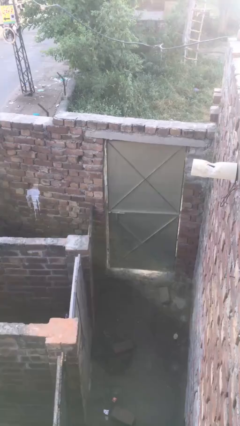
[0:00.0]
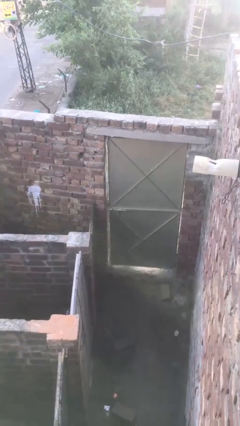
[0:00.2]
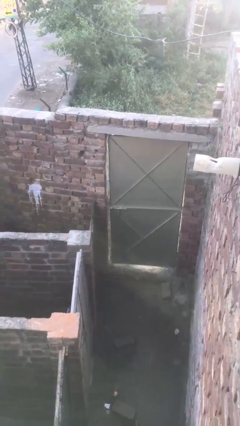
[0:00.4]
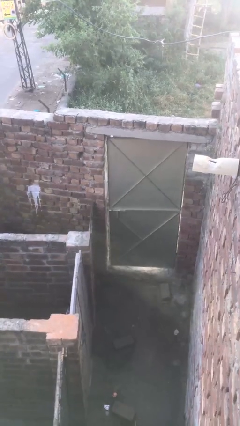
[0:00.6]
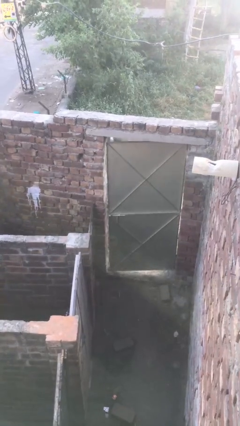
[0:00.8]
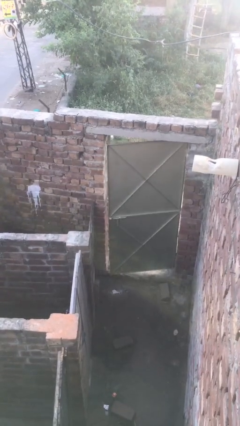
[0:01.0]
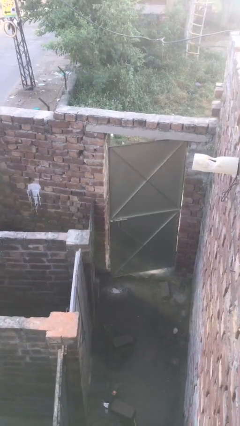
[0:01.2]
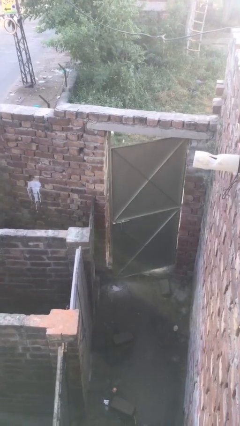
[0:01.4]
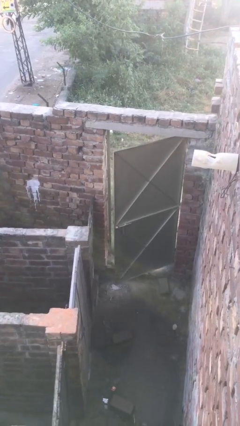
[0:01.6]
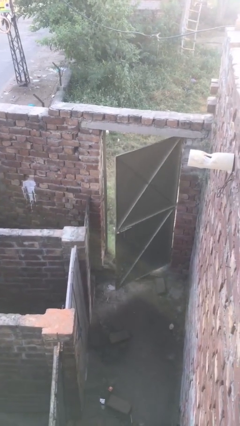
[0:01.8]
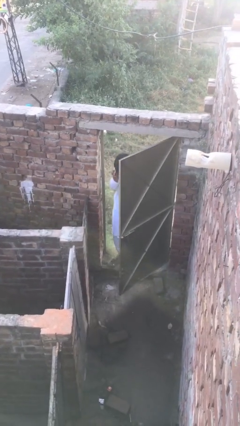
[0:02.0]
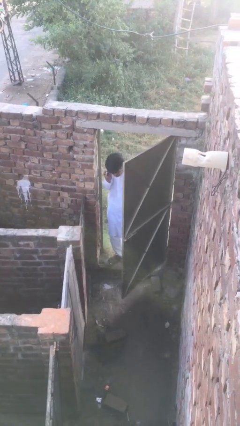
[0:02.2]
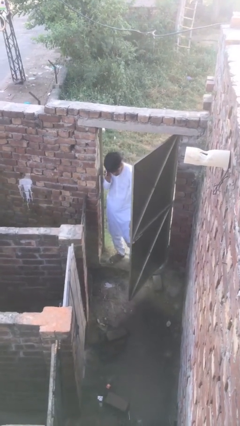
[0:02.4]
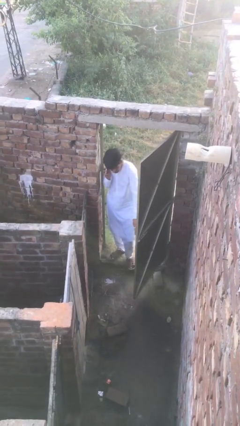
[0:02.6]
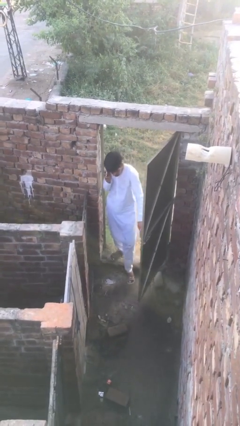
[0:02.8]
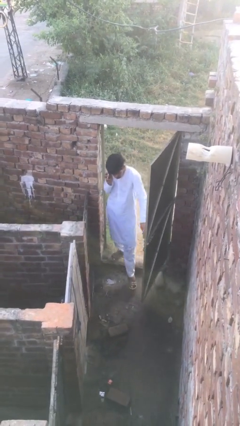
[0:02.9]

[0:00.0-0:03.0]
person opens facility door

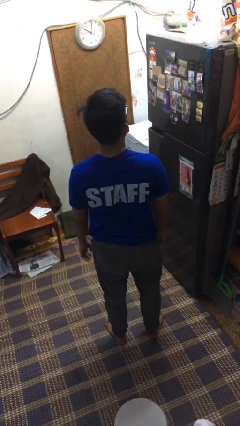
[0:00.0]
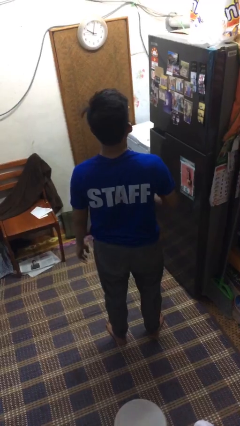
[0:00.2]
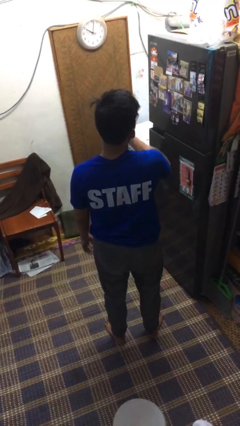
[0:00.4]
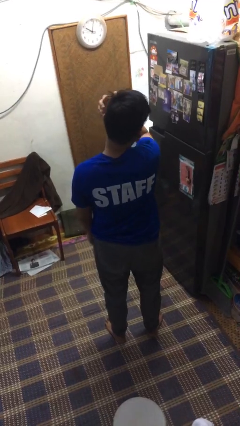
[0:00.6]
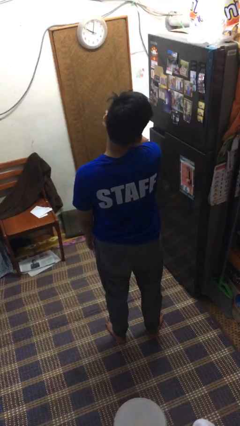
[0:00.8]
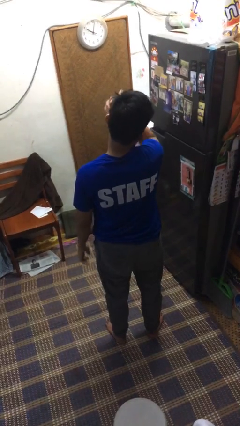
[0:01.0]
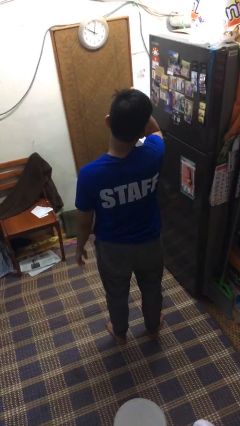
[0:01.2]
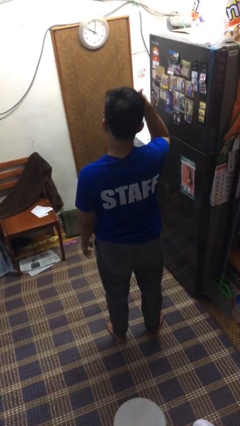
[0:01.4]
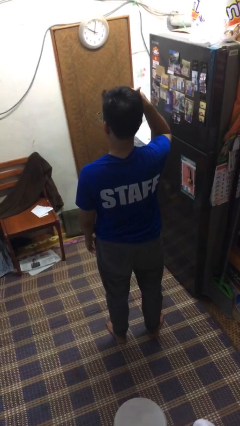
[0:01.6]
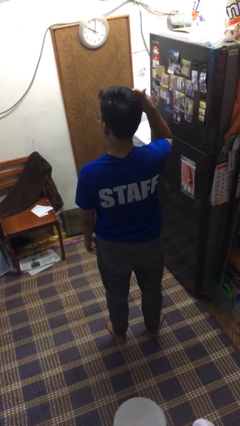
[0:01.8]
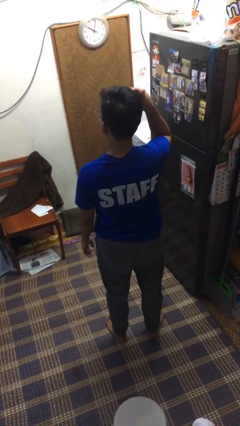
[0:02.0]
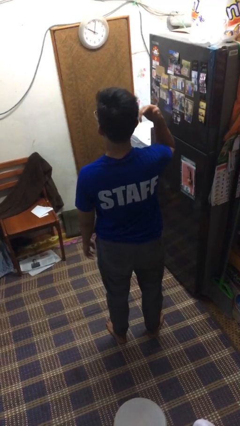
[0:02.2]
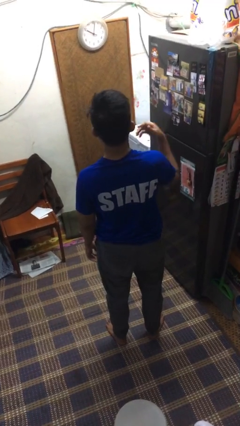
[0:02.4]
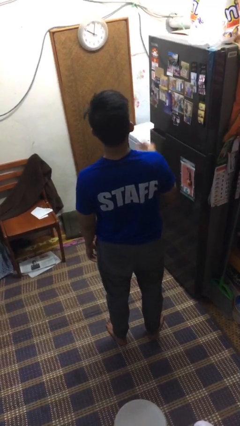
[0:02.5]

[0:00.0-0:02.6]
person scratches face

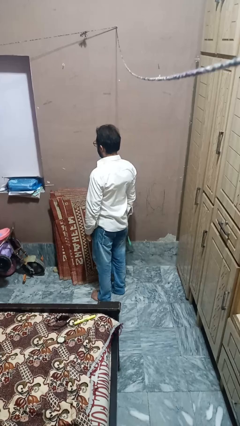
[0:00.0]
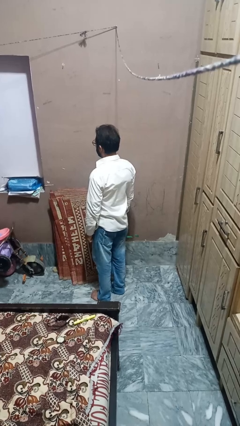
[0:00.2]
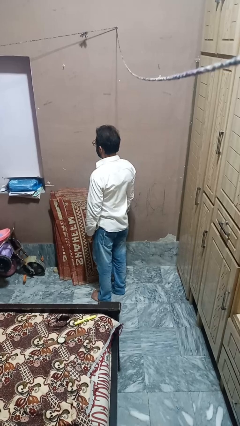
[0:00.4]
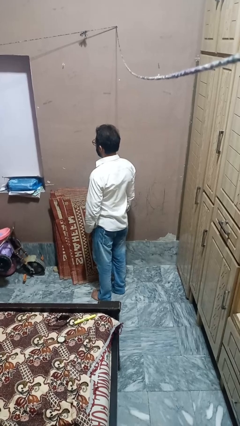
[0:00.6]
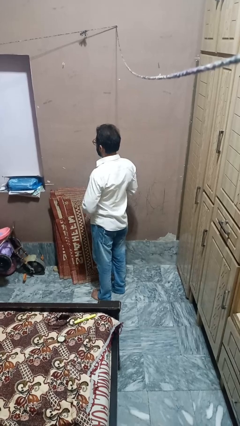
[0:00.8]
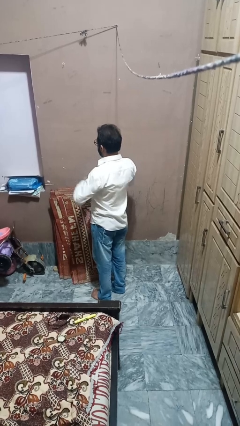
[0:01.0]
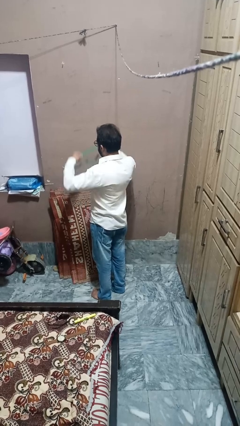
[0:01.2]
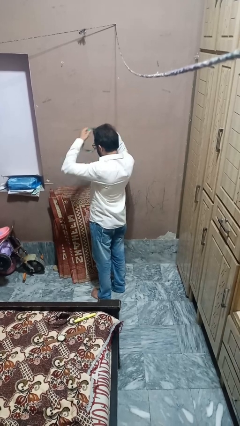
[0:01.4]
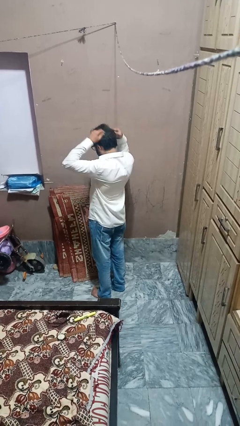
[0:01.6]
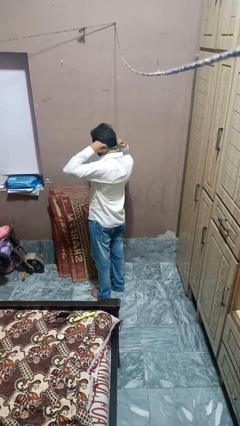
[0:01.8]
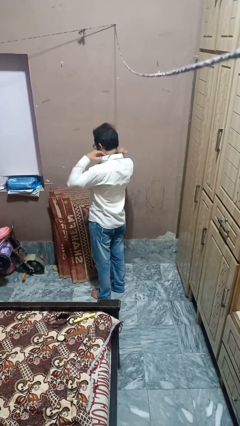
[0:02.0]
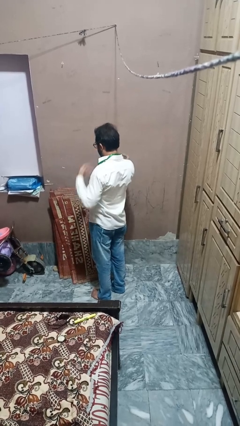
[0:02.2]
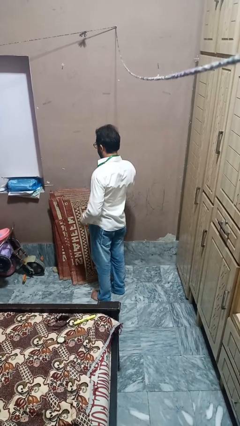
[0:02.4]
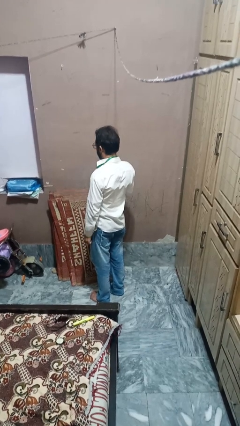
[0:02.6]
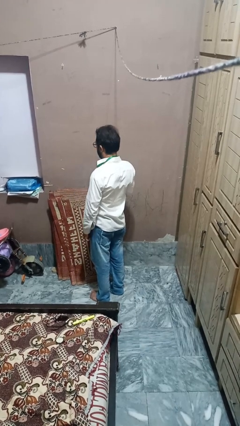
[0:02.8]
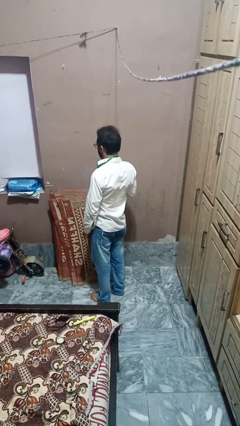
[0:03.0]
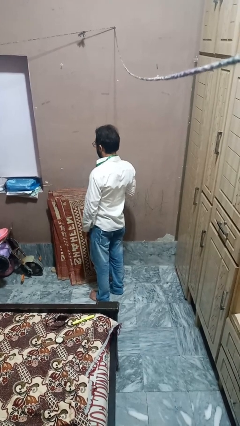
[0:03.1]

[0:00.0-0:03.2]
person puts on necklace

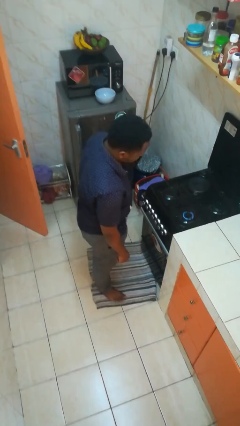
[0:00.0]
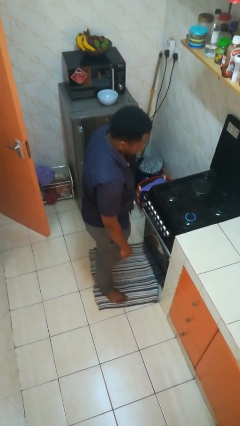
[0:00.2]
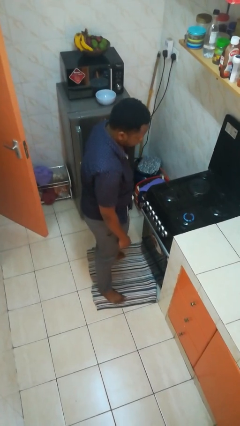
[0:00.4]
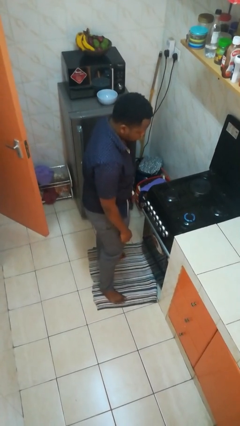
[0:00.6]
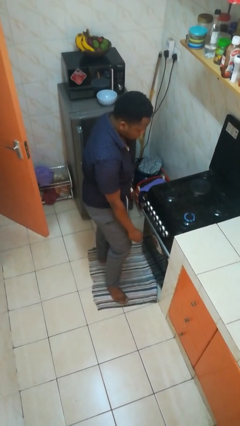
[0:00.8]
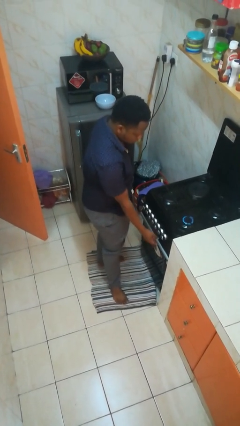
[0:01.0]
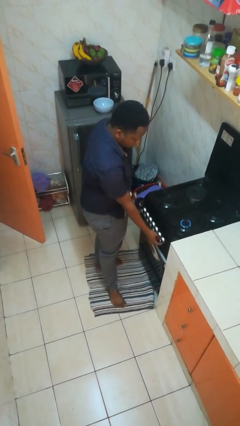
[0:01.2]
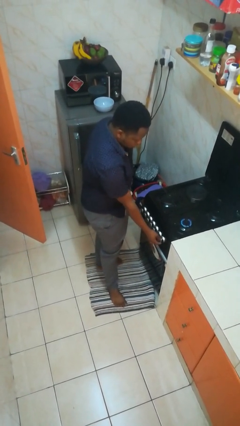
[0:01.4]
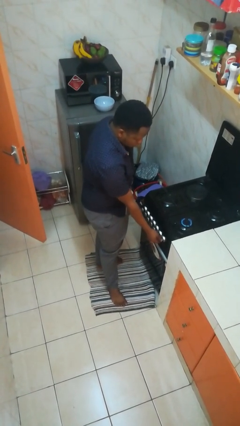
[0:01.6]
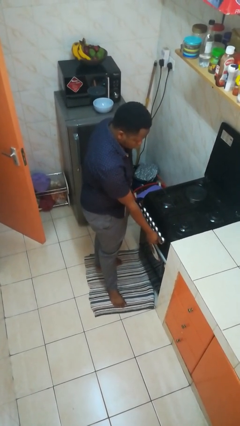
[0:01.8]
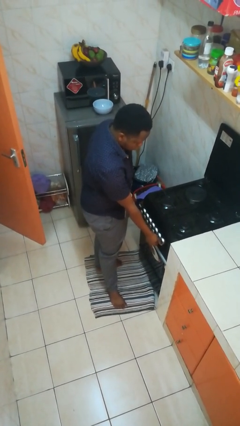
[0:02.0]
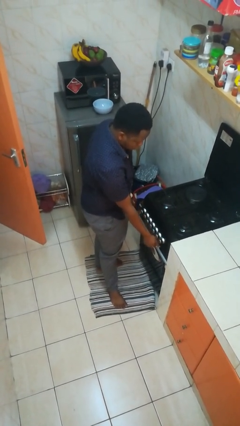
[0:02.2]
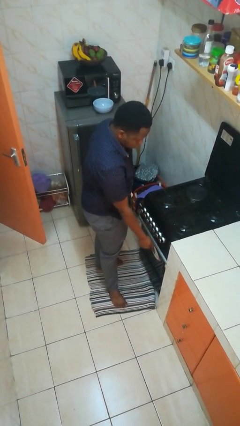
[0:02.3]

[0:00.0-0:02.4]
person turns off stovetop

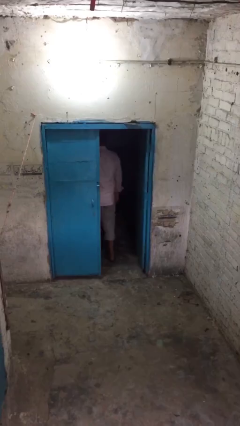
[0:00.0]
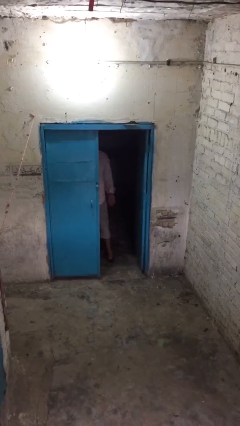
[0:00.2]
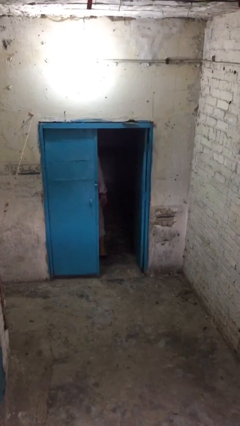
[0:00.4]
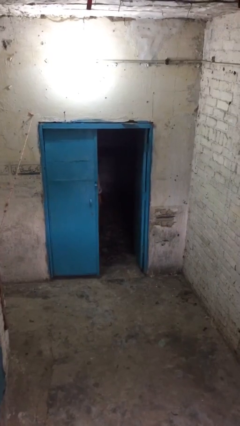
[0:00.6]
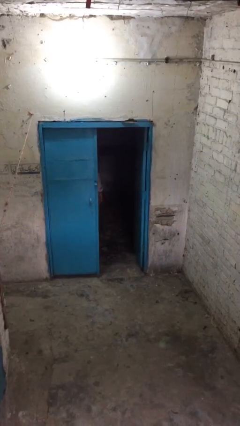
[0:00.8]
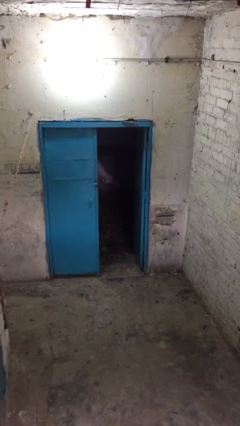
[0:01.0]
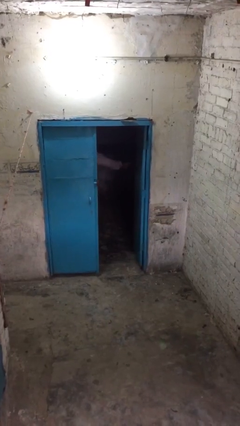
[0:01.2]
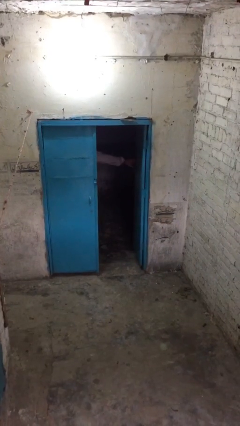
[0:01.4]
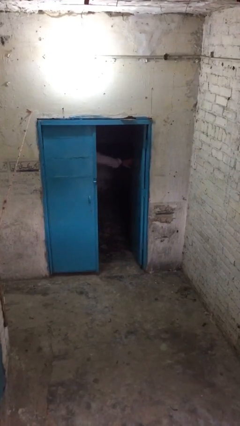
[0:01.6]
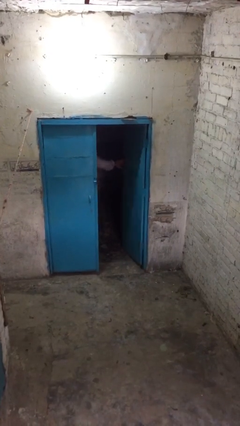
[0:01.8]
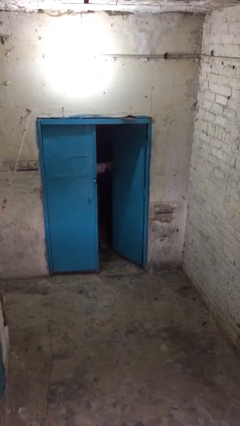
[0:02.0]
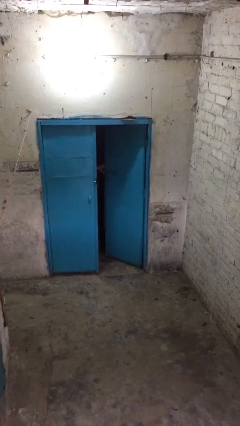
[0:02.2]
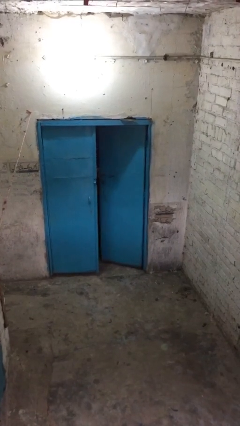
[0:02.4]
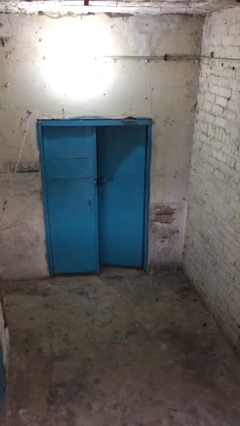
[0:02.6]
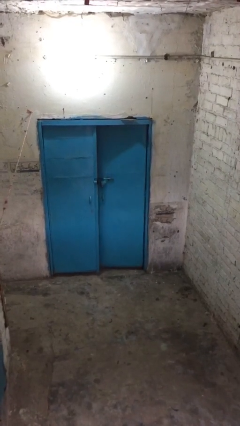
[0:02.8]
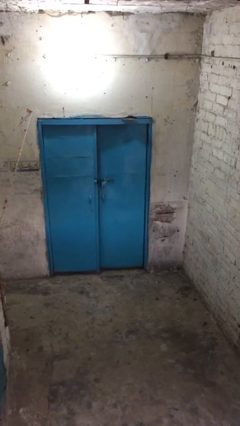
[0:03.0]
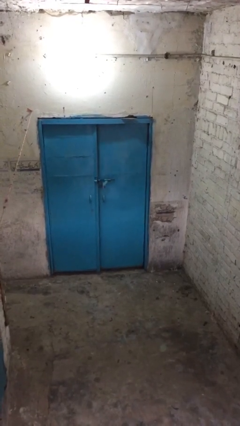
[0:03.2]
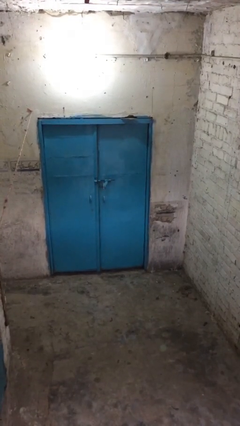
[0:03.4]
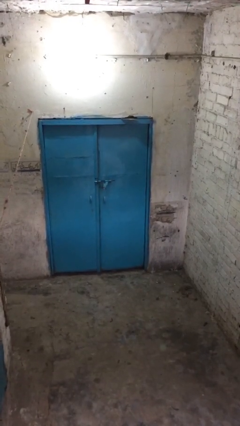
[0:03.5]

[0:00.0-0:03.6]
person closes facility door

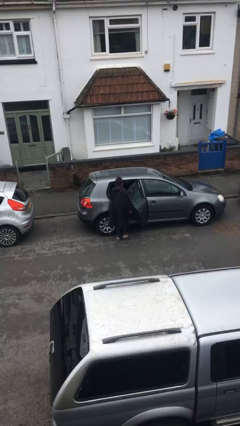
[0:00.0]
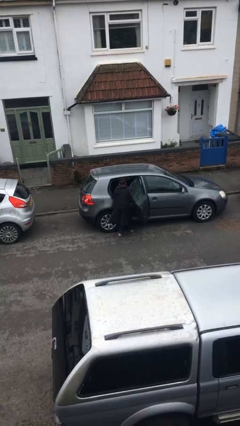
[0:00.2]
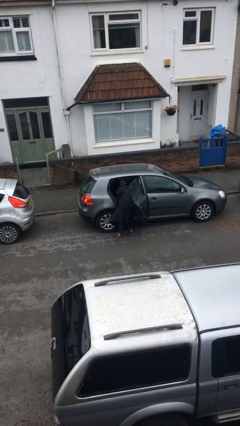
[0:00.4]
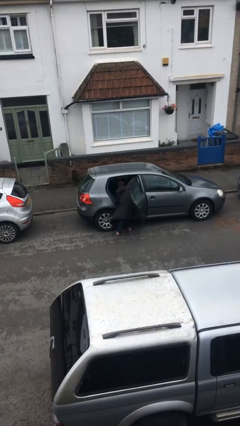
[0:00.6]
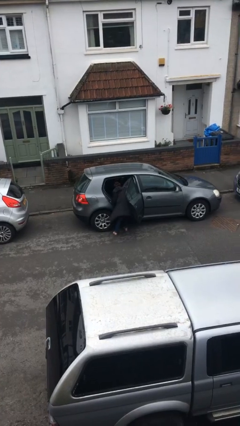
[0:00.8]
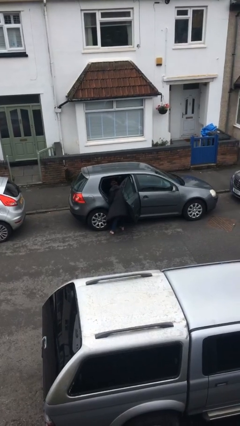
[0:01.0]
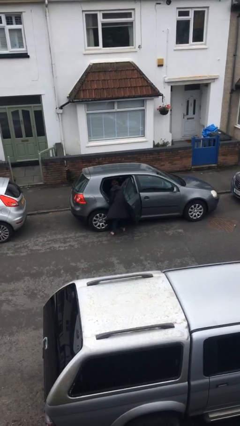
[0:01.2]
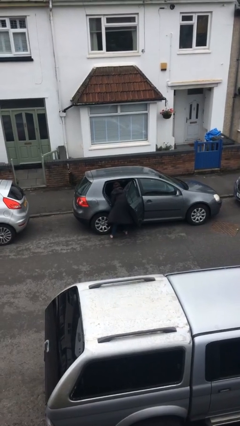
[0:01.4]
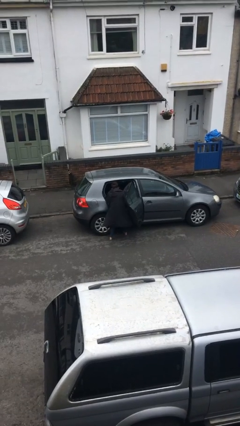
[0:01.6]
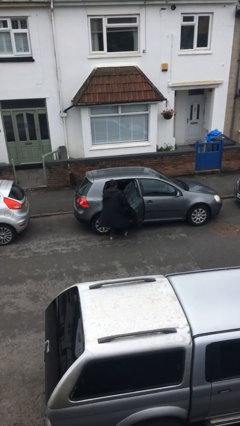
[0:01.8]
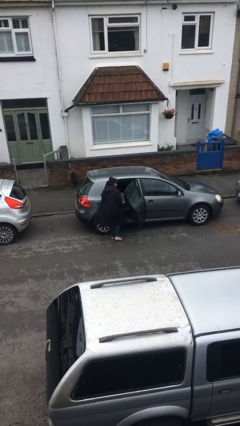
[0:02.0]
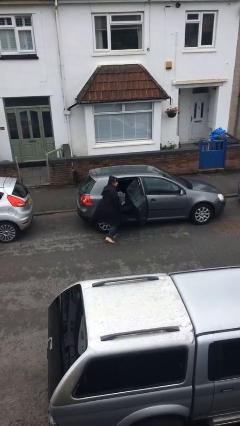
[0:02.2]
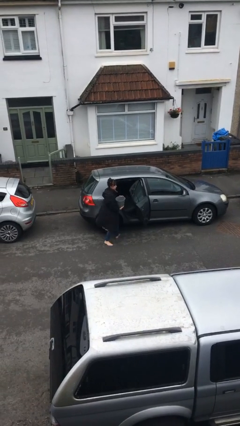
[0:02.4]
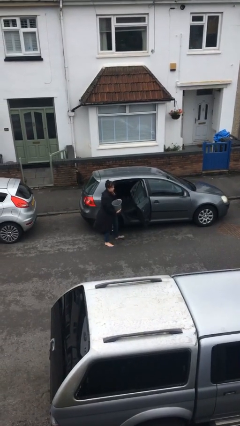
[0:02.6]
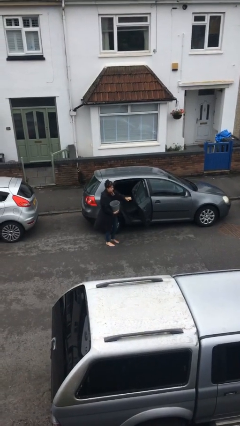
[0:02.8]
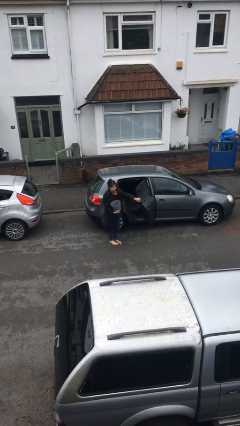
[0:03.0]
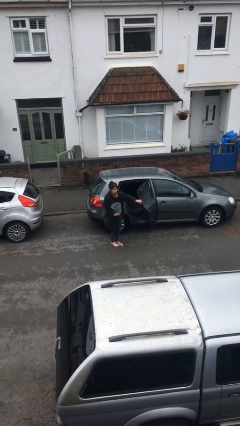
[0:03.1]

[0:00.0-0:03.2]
person unloads car
